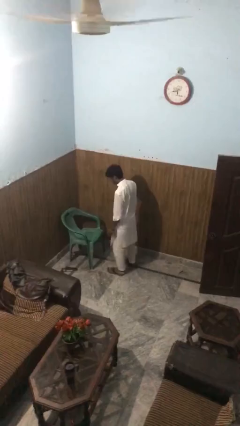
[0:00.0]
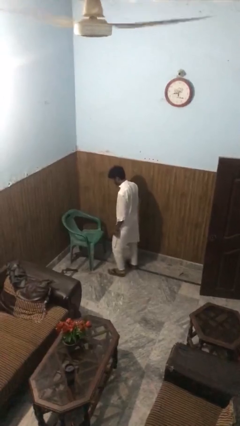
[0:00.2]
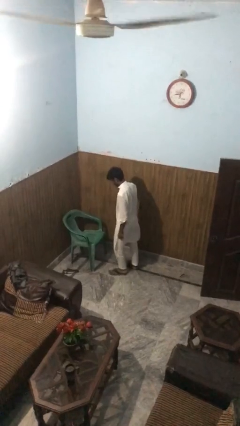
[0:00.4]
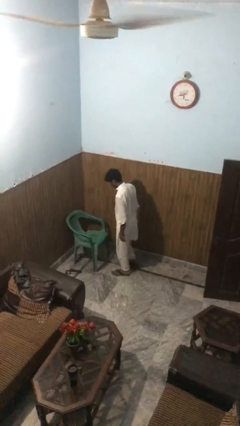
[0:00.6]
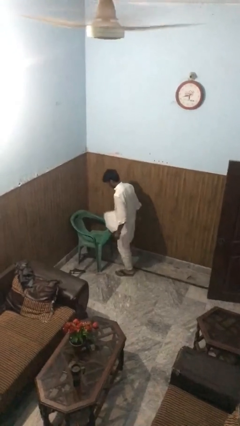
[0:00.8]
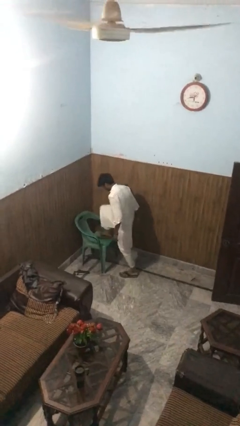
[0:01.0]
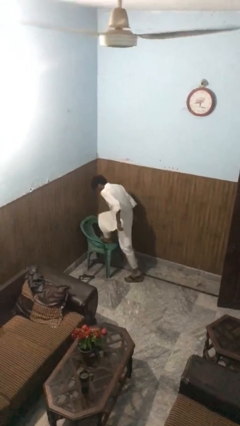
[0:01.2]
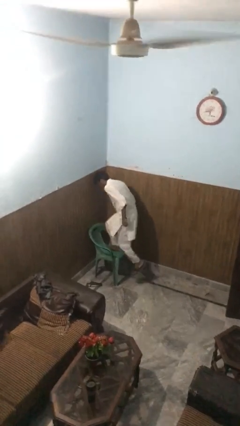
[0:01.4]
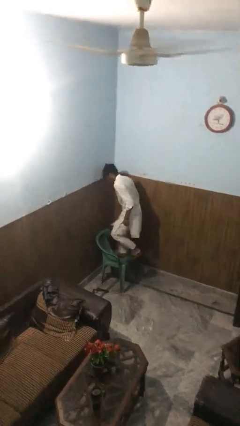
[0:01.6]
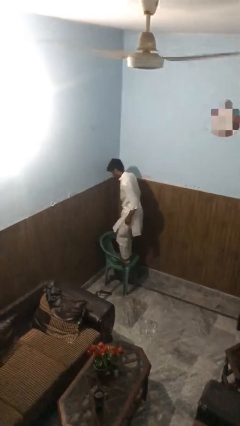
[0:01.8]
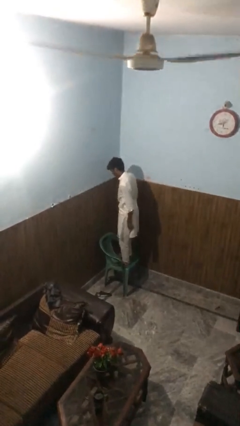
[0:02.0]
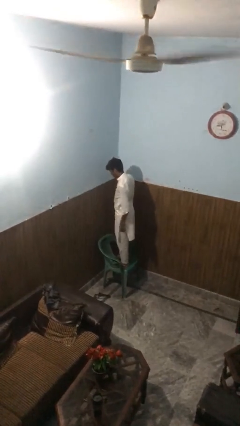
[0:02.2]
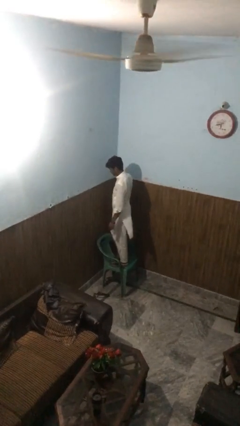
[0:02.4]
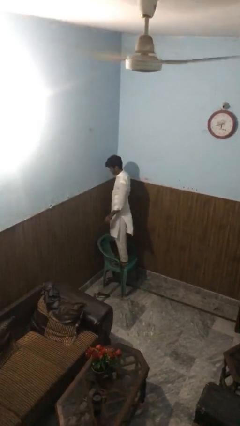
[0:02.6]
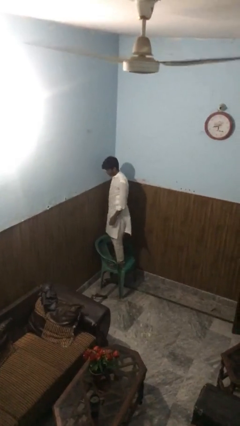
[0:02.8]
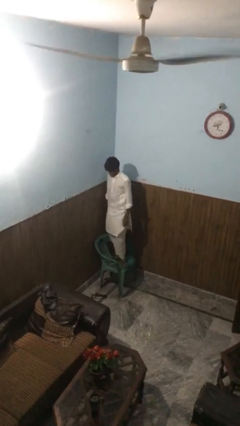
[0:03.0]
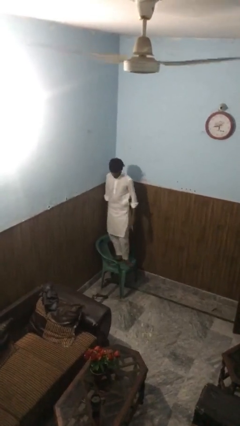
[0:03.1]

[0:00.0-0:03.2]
person climbs on chair

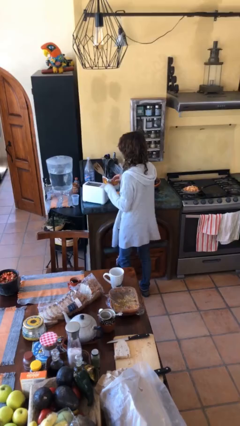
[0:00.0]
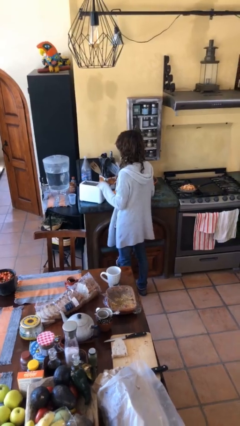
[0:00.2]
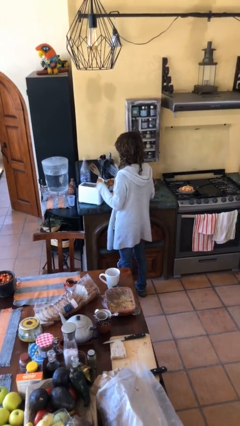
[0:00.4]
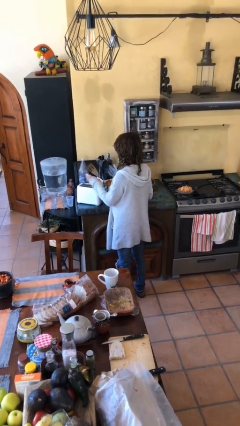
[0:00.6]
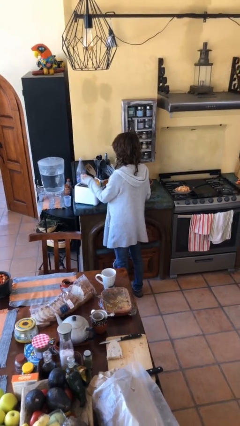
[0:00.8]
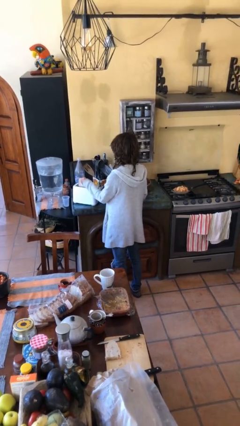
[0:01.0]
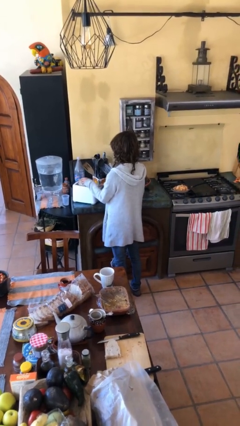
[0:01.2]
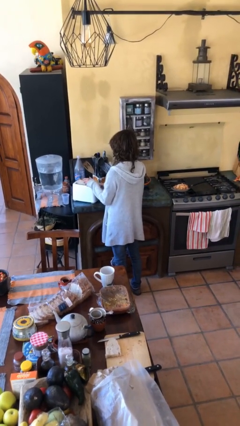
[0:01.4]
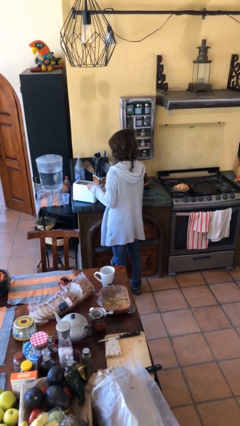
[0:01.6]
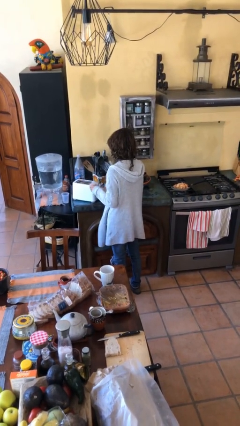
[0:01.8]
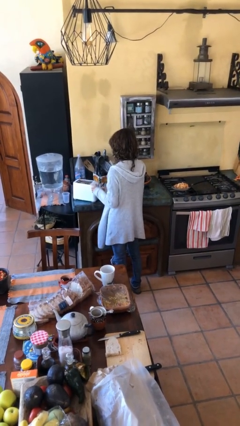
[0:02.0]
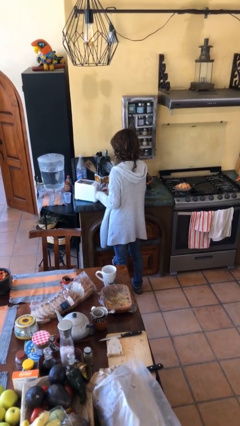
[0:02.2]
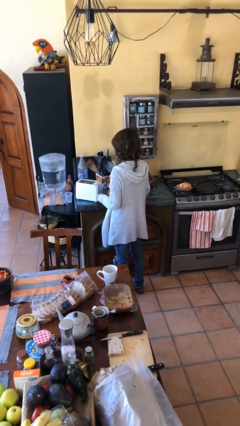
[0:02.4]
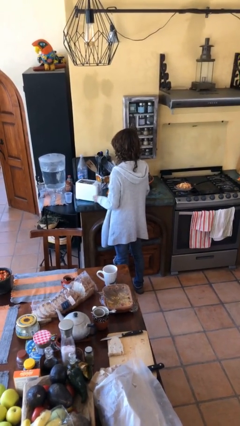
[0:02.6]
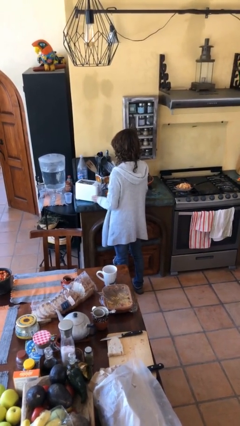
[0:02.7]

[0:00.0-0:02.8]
person puts object into toaster

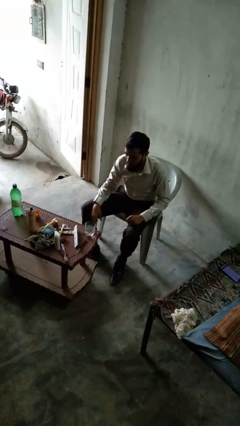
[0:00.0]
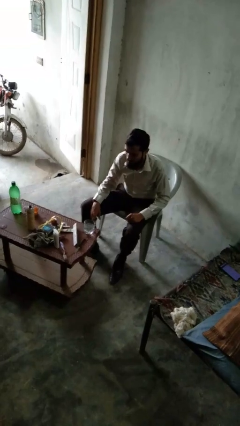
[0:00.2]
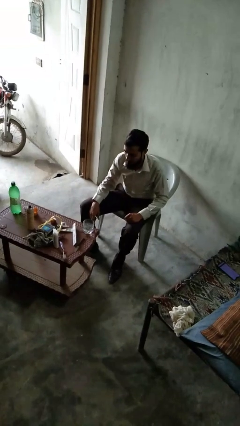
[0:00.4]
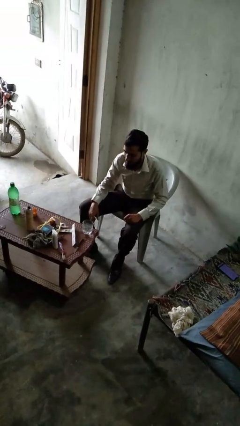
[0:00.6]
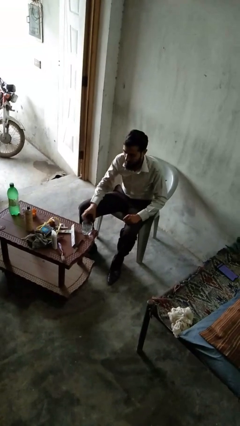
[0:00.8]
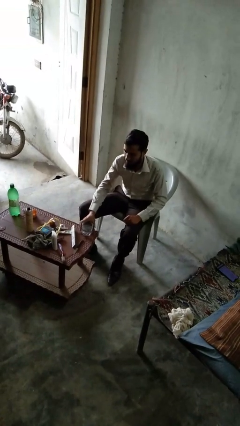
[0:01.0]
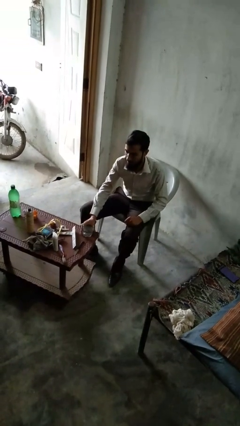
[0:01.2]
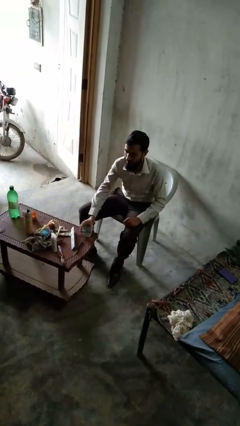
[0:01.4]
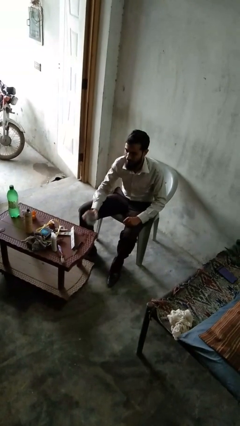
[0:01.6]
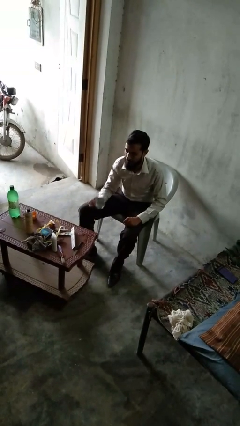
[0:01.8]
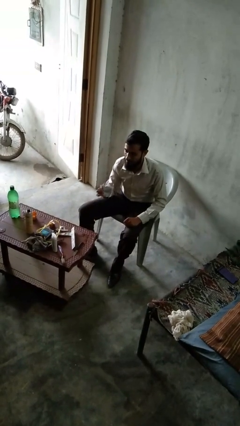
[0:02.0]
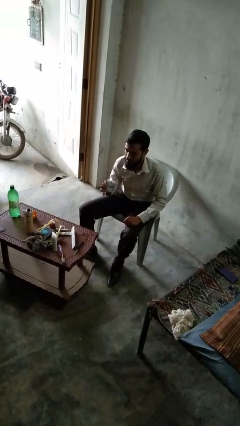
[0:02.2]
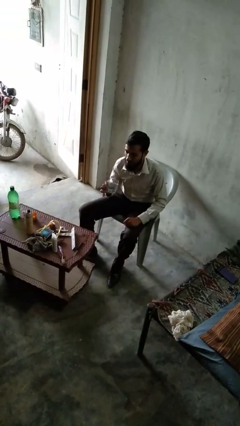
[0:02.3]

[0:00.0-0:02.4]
person picks up object from table

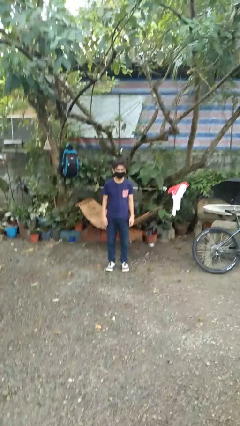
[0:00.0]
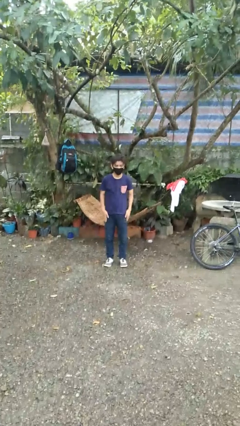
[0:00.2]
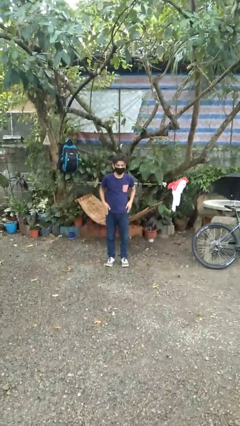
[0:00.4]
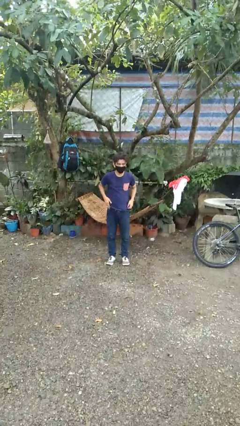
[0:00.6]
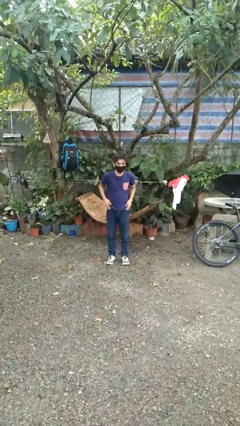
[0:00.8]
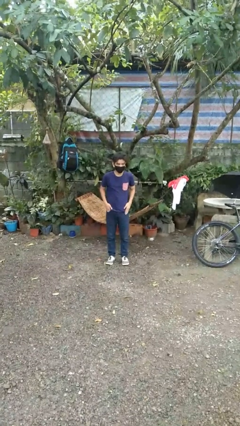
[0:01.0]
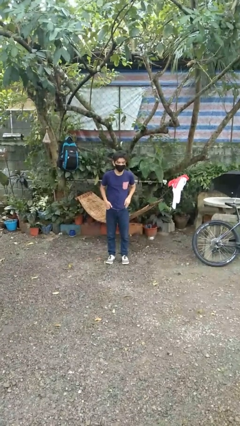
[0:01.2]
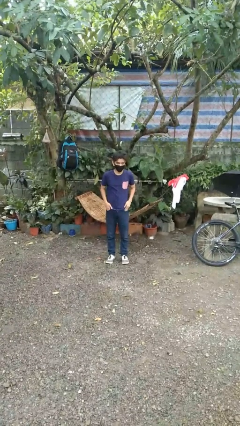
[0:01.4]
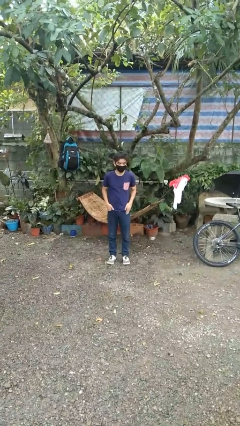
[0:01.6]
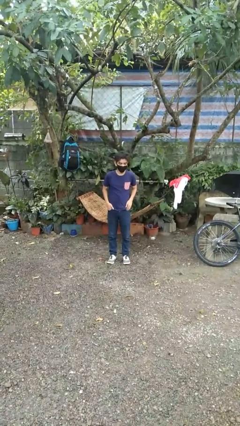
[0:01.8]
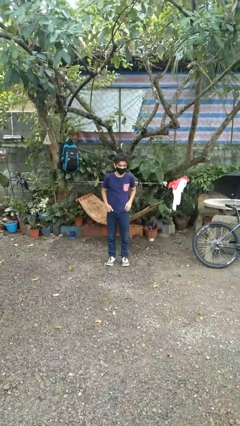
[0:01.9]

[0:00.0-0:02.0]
person puts hands in back pockets

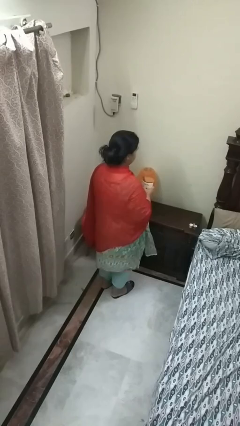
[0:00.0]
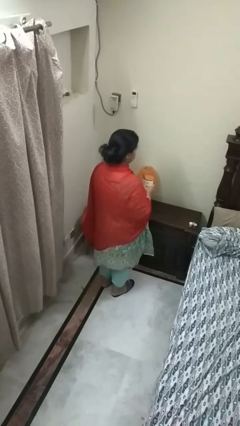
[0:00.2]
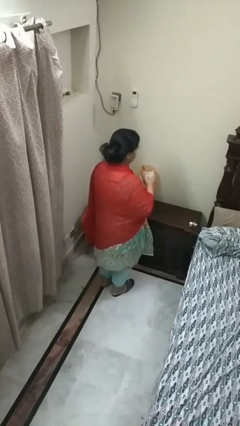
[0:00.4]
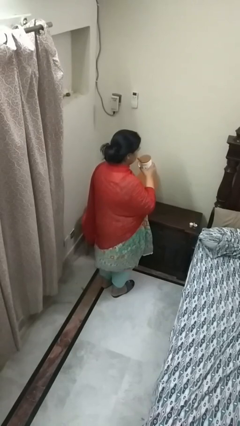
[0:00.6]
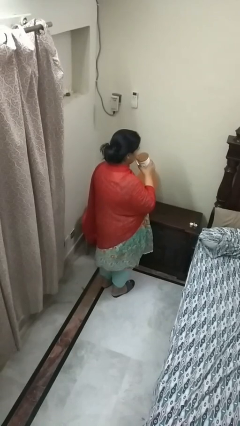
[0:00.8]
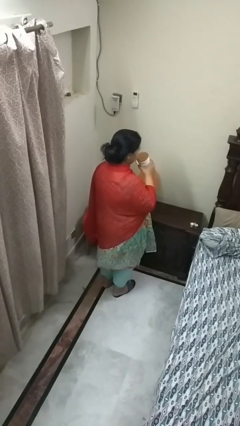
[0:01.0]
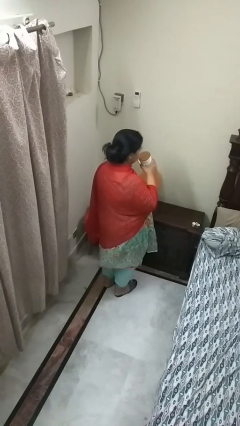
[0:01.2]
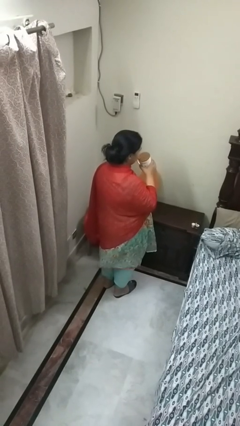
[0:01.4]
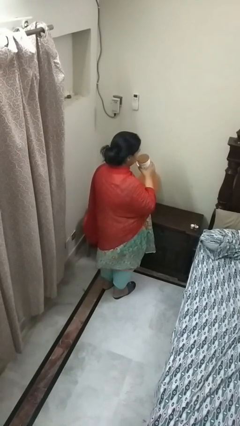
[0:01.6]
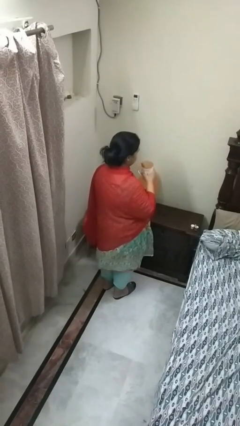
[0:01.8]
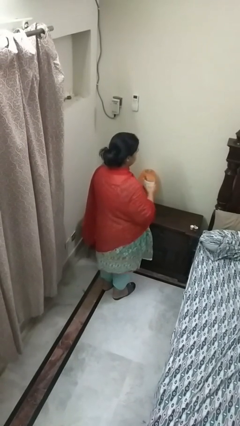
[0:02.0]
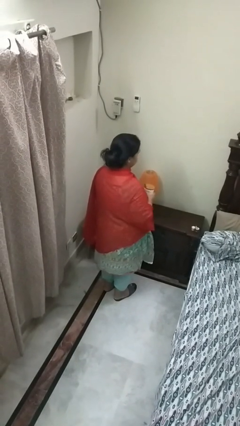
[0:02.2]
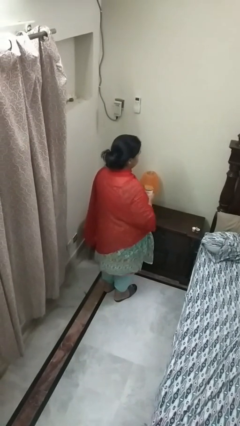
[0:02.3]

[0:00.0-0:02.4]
person drinks from straw

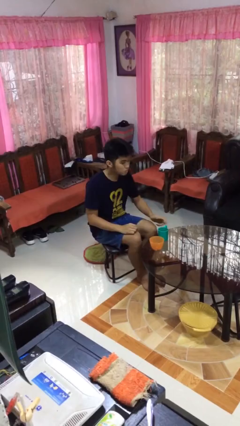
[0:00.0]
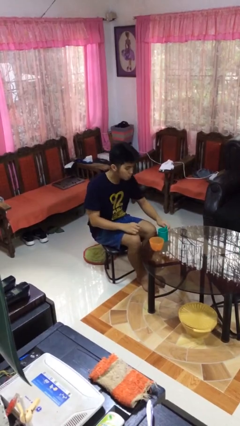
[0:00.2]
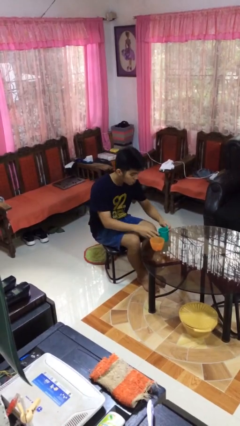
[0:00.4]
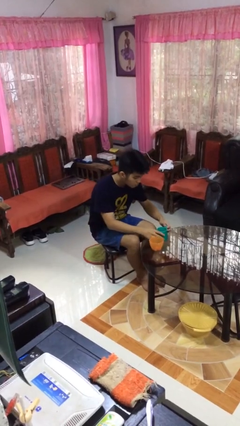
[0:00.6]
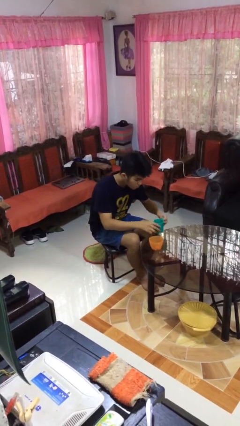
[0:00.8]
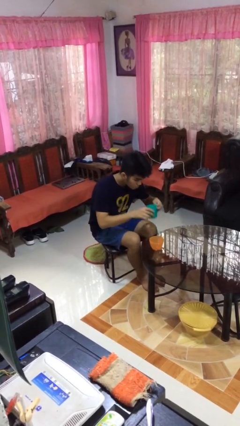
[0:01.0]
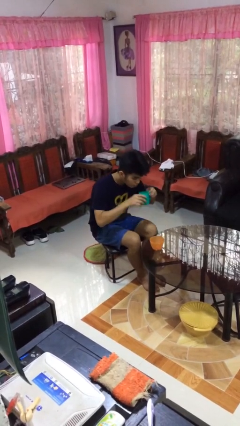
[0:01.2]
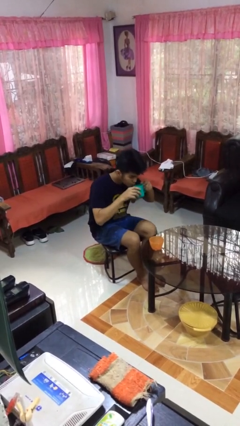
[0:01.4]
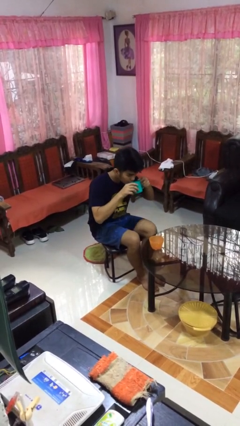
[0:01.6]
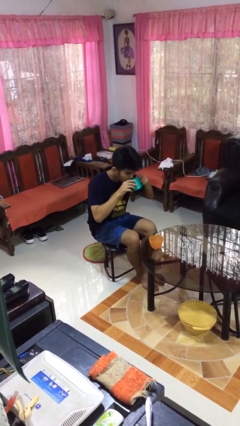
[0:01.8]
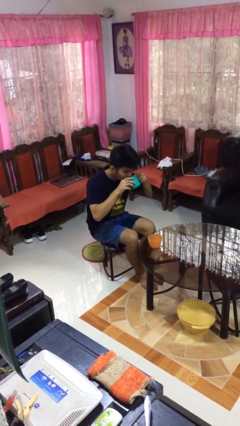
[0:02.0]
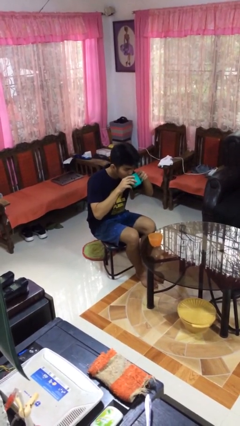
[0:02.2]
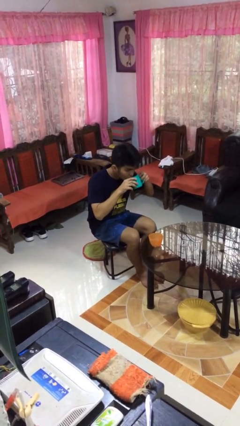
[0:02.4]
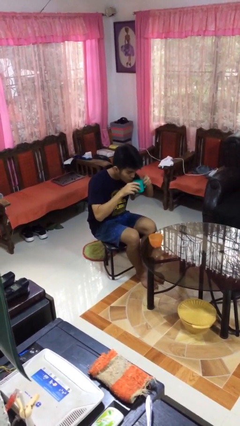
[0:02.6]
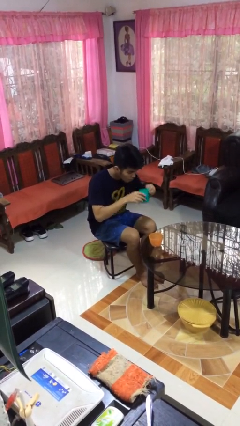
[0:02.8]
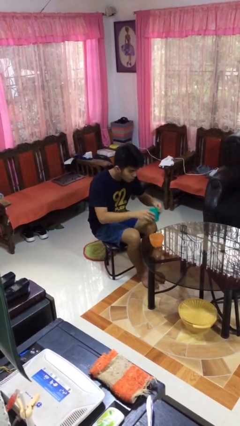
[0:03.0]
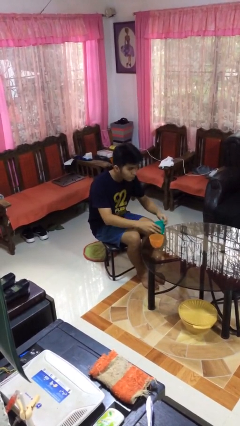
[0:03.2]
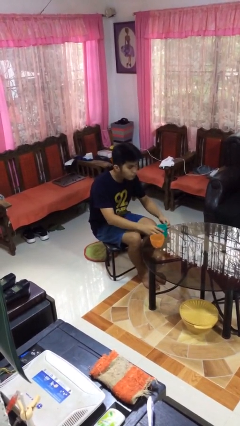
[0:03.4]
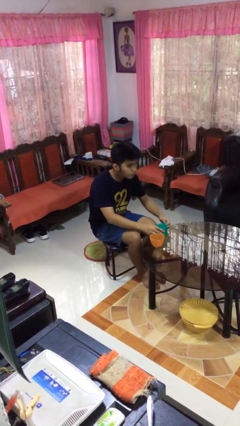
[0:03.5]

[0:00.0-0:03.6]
person drinks from cup

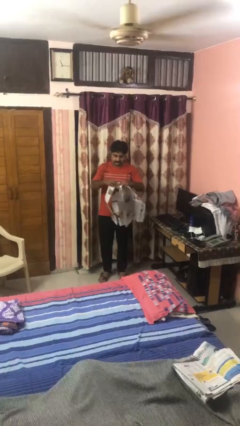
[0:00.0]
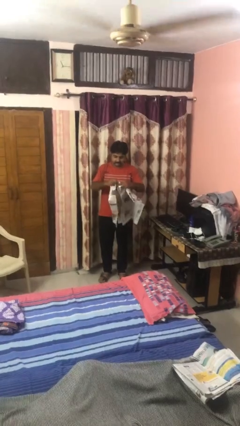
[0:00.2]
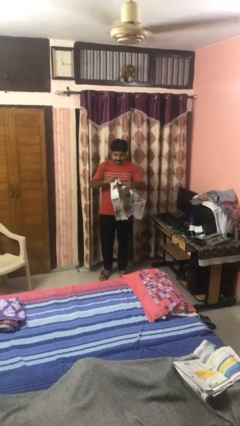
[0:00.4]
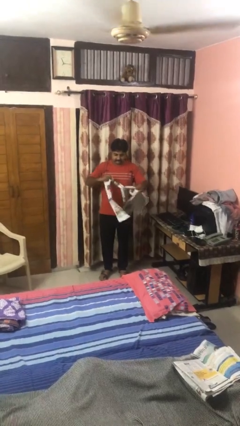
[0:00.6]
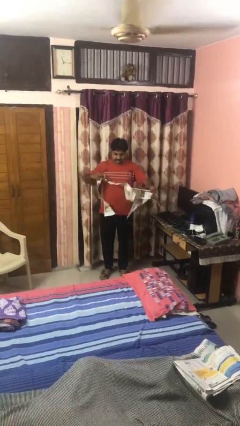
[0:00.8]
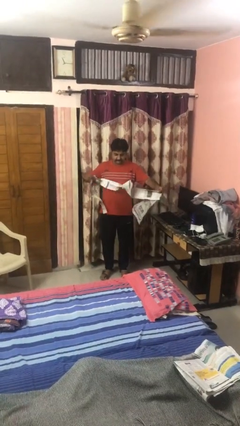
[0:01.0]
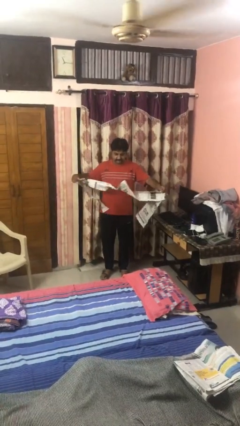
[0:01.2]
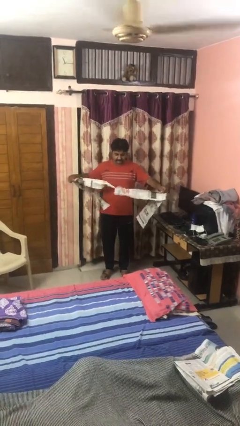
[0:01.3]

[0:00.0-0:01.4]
person tears paper
